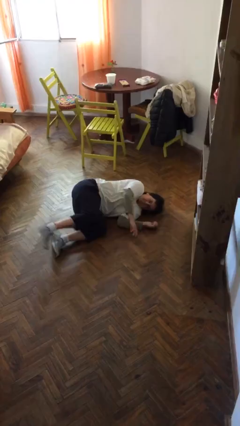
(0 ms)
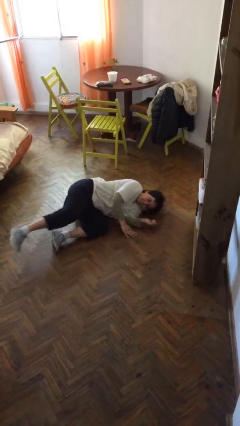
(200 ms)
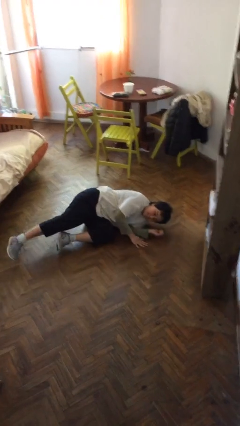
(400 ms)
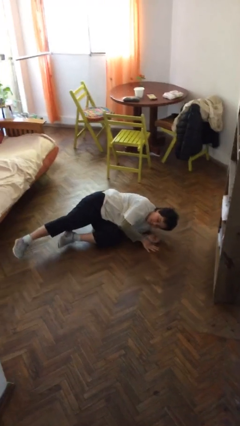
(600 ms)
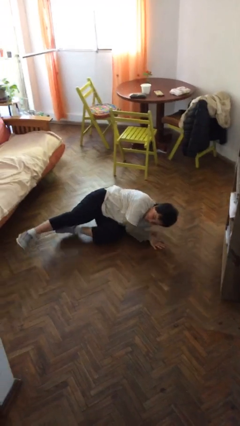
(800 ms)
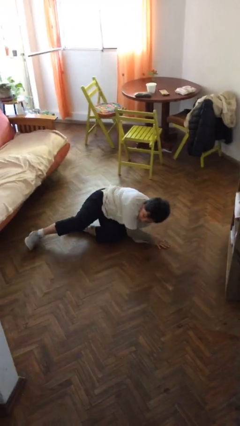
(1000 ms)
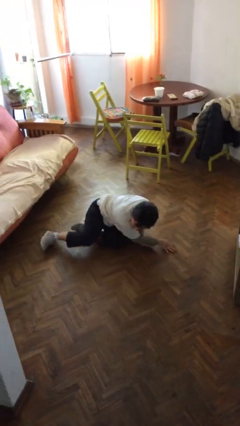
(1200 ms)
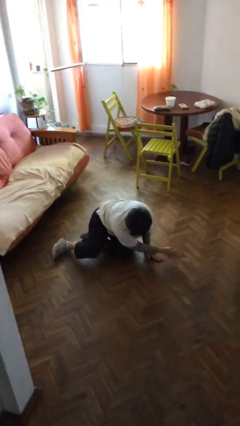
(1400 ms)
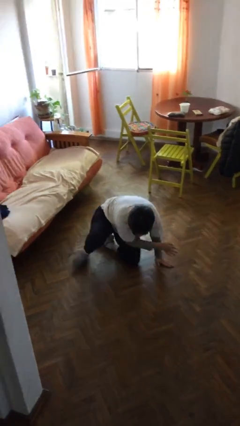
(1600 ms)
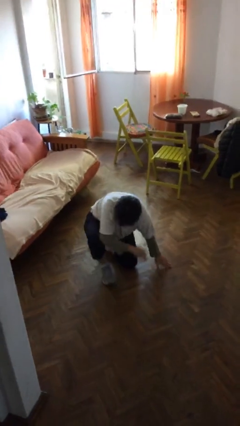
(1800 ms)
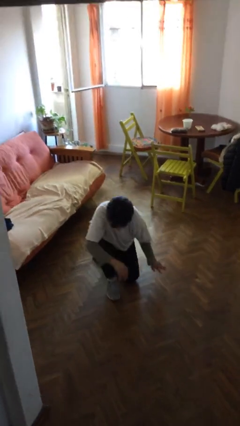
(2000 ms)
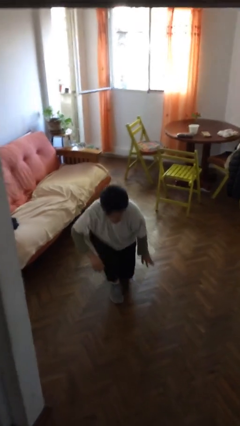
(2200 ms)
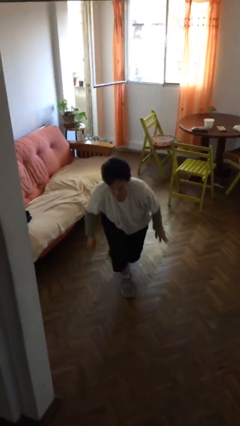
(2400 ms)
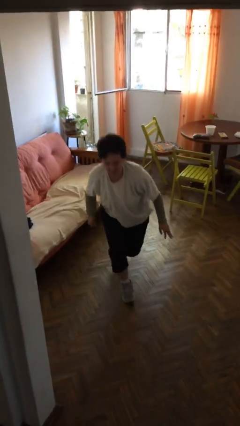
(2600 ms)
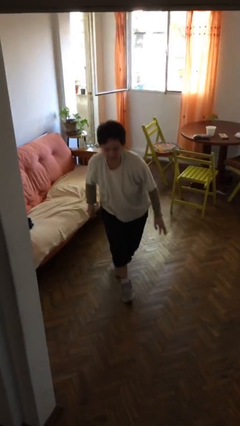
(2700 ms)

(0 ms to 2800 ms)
person stands up from floor

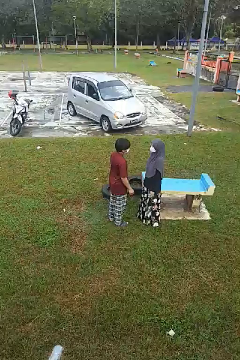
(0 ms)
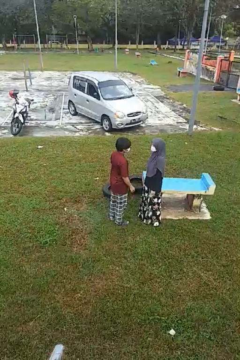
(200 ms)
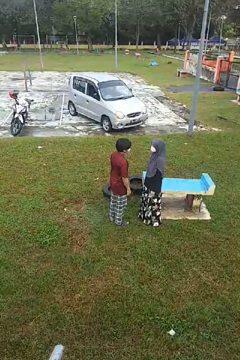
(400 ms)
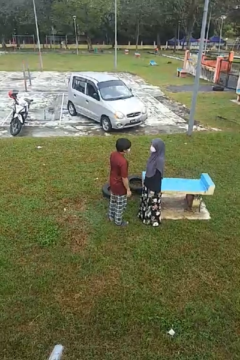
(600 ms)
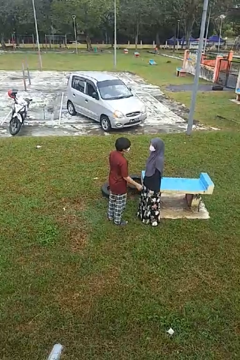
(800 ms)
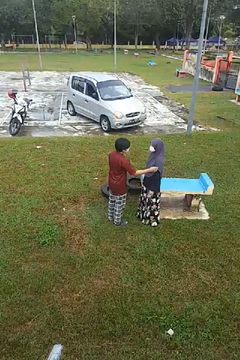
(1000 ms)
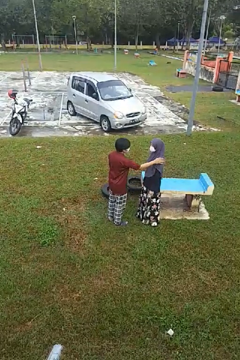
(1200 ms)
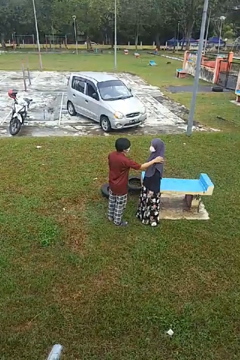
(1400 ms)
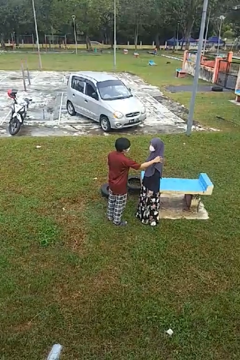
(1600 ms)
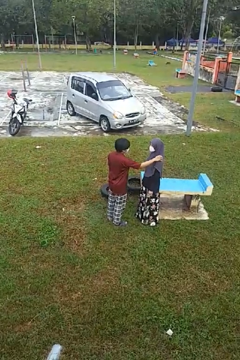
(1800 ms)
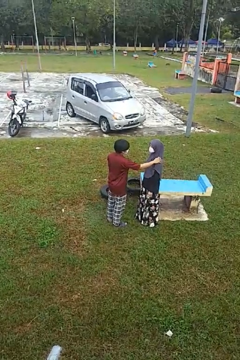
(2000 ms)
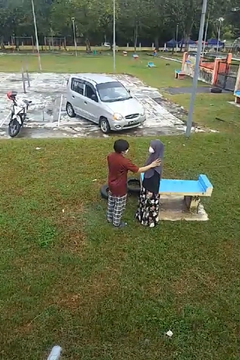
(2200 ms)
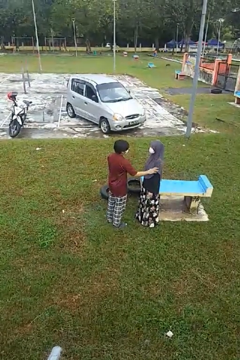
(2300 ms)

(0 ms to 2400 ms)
person pounds shoulders of person

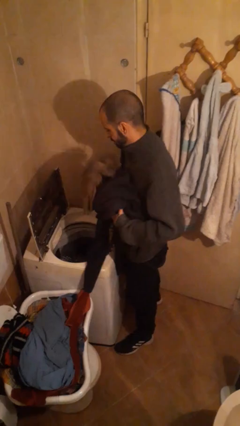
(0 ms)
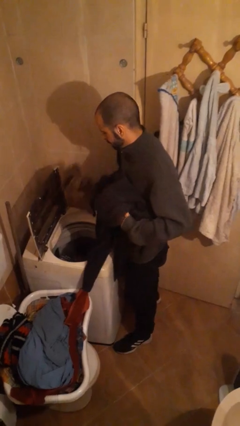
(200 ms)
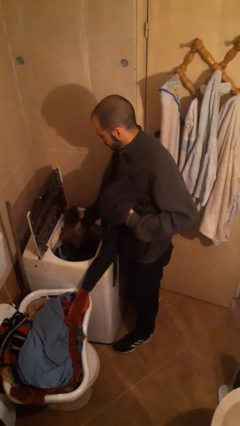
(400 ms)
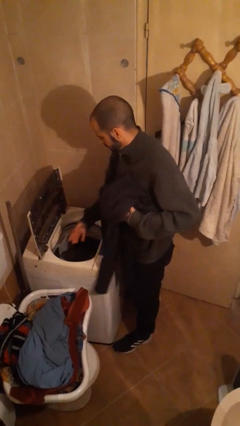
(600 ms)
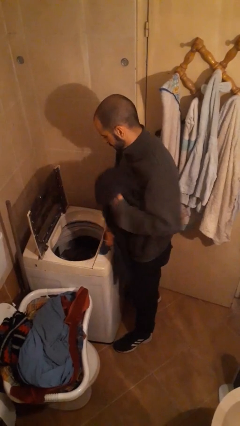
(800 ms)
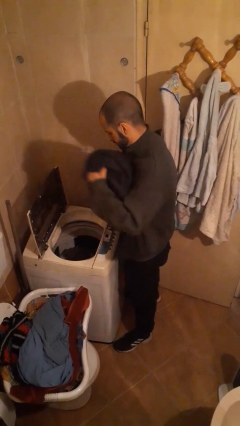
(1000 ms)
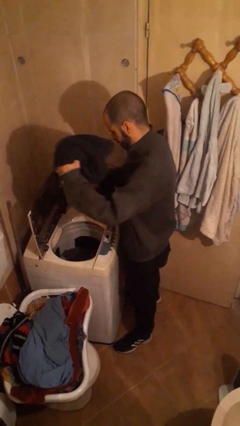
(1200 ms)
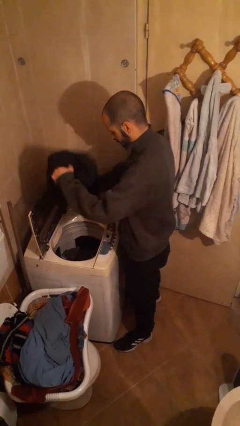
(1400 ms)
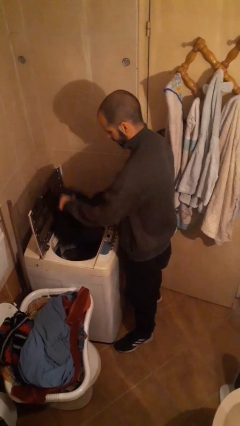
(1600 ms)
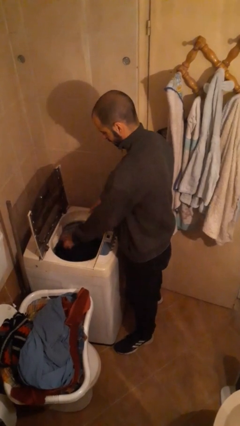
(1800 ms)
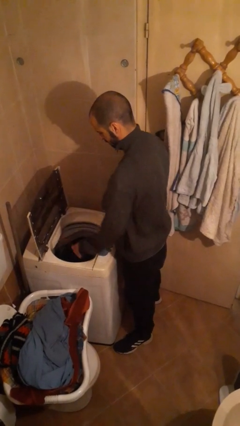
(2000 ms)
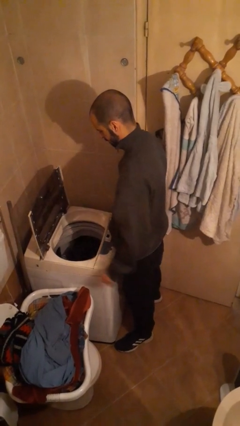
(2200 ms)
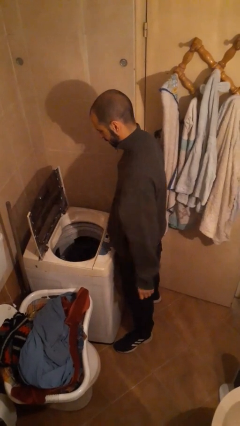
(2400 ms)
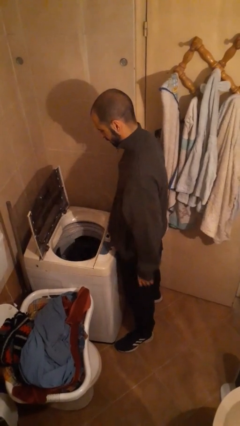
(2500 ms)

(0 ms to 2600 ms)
person loads clotheswasher

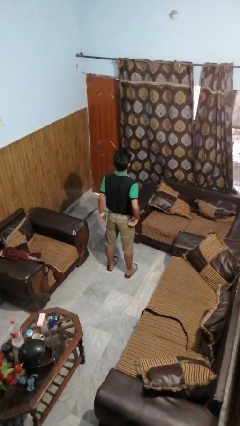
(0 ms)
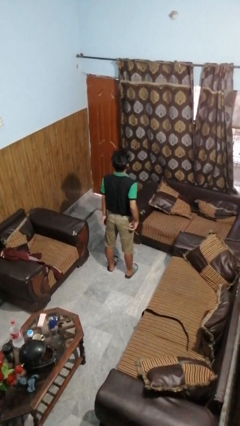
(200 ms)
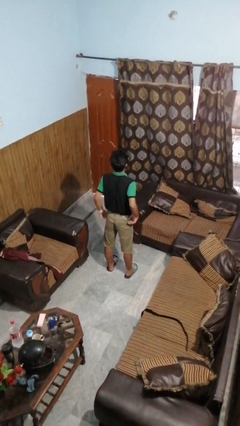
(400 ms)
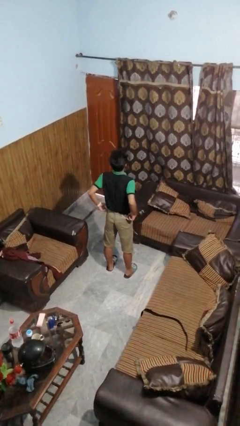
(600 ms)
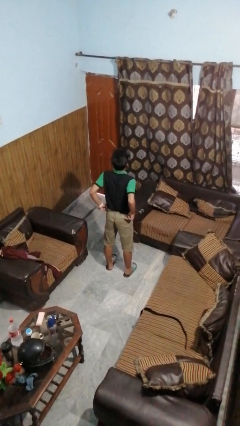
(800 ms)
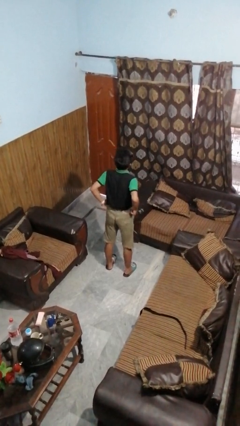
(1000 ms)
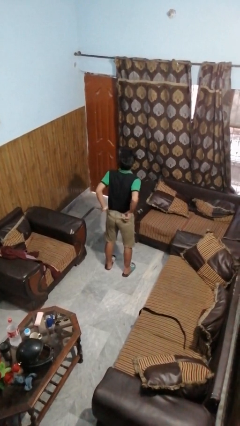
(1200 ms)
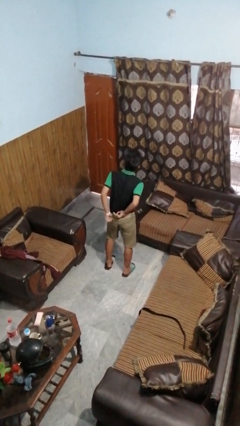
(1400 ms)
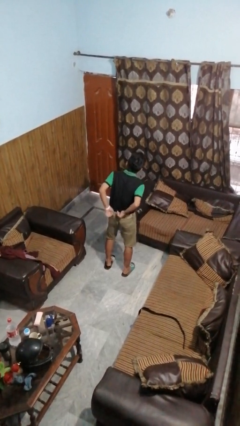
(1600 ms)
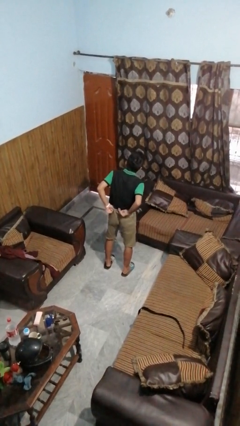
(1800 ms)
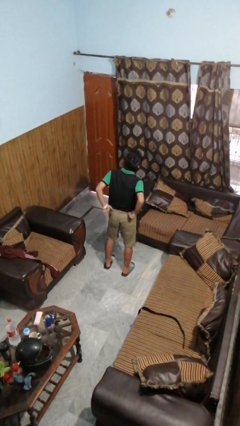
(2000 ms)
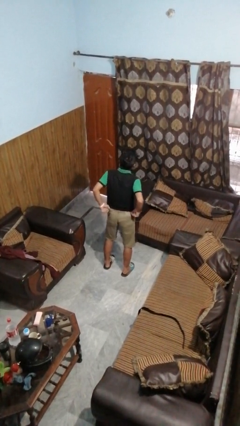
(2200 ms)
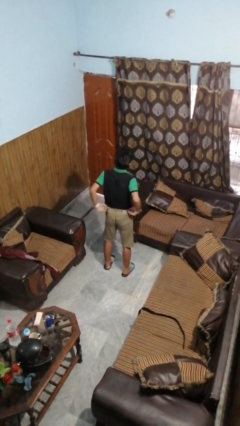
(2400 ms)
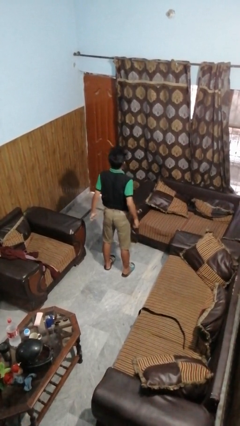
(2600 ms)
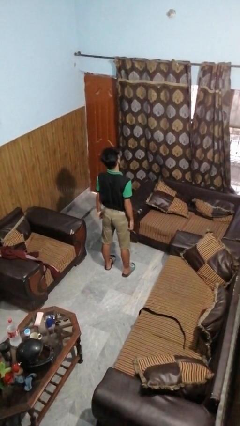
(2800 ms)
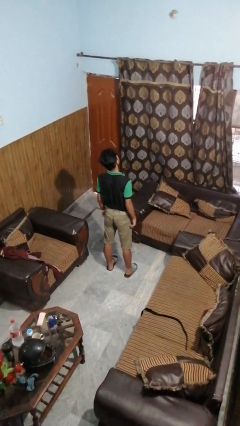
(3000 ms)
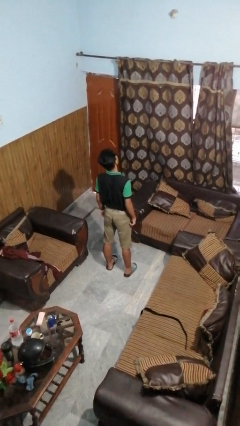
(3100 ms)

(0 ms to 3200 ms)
person hikes up pants

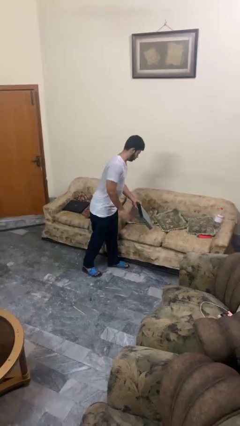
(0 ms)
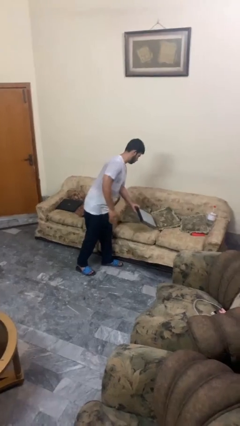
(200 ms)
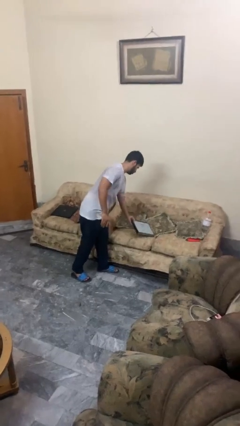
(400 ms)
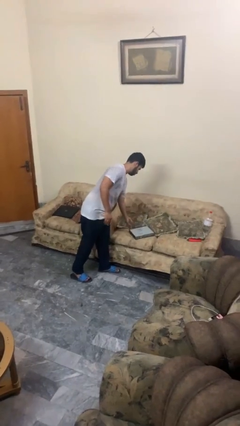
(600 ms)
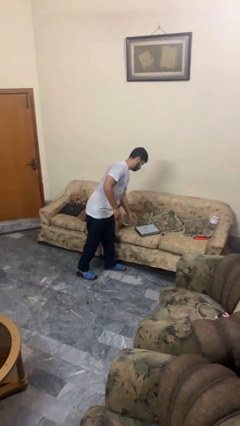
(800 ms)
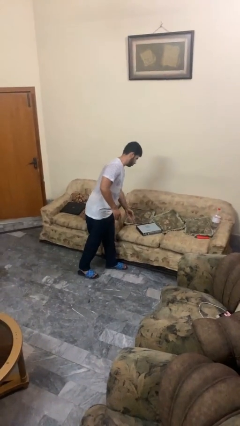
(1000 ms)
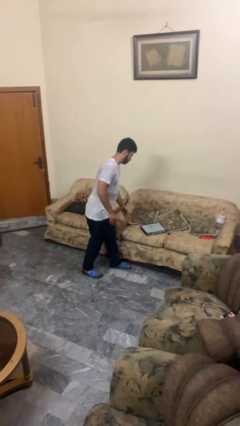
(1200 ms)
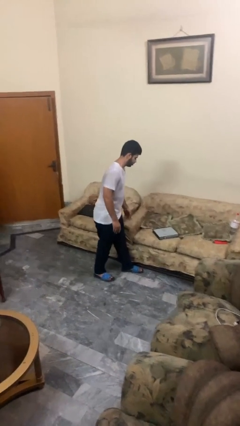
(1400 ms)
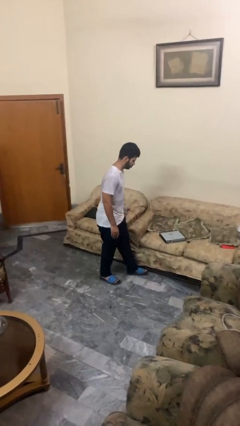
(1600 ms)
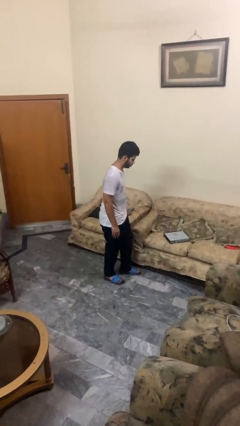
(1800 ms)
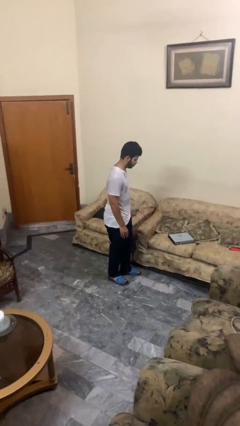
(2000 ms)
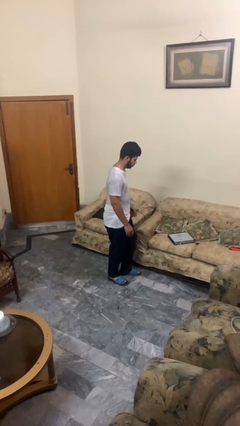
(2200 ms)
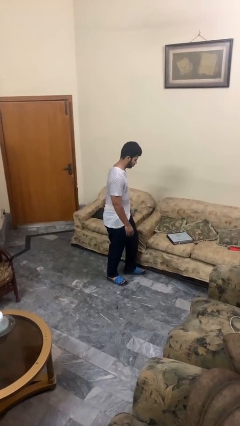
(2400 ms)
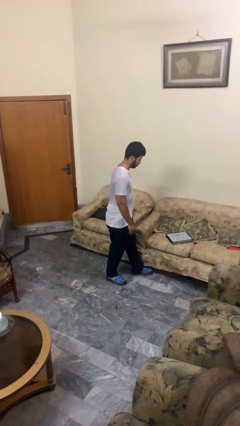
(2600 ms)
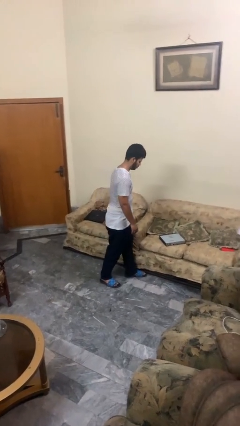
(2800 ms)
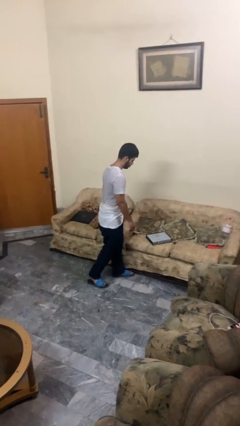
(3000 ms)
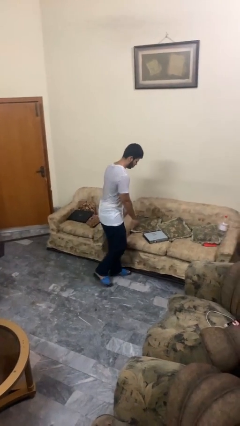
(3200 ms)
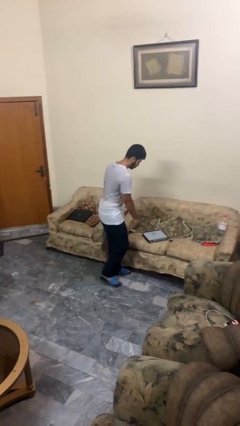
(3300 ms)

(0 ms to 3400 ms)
person puts down object on couch

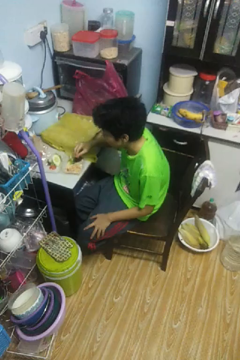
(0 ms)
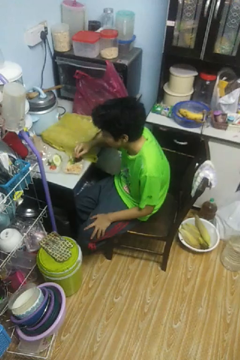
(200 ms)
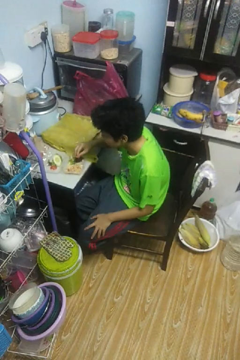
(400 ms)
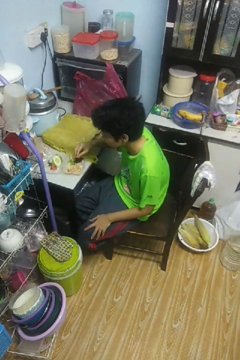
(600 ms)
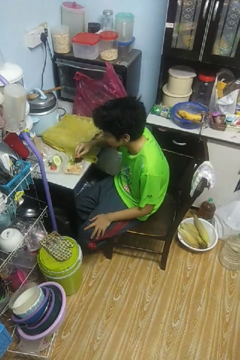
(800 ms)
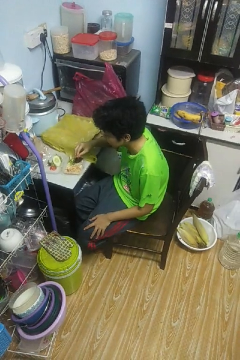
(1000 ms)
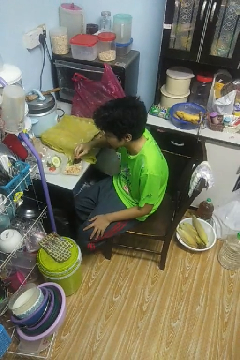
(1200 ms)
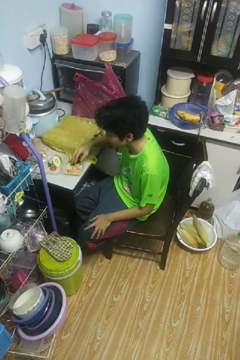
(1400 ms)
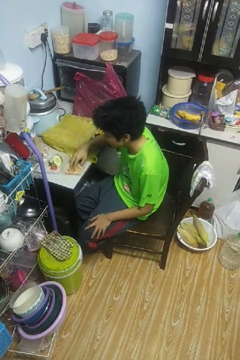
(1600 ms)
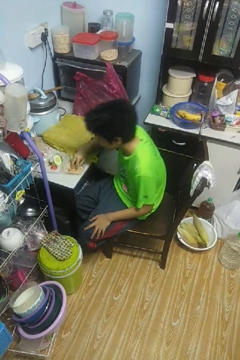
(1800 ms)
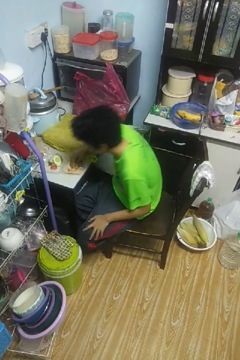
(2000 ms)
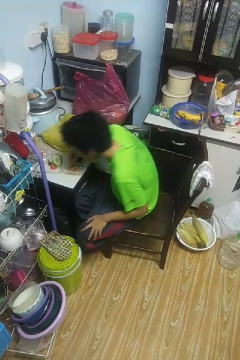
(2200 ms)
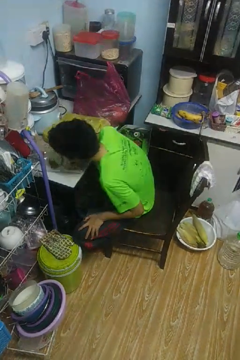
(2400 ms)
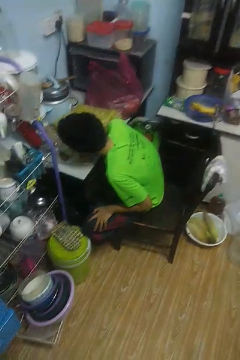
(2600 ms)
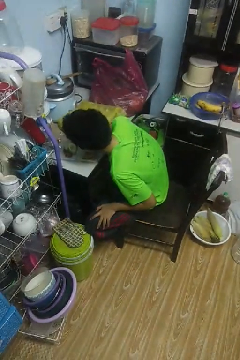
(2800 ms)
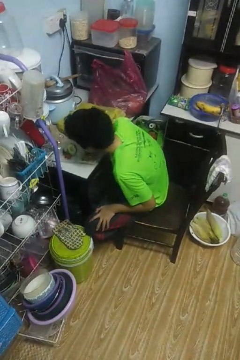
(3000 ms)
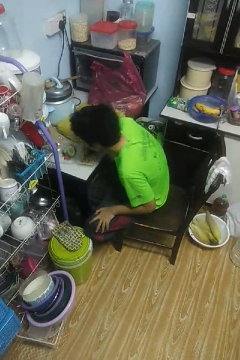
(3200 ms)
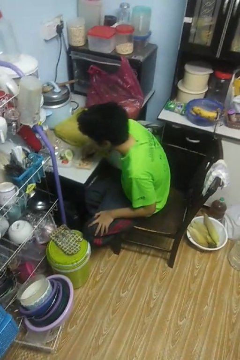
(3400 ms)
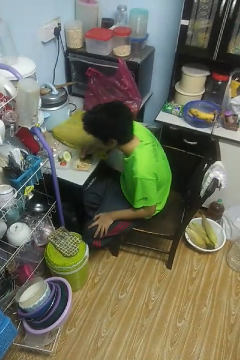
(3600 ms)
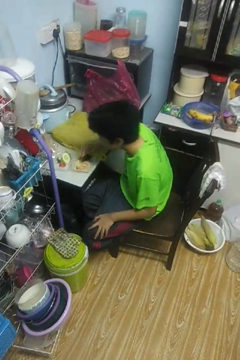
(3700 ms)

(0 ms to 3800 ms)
person eats with hands
